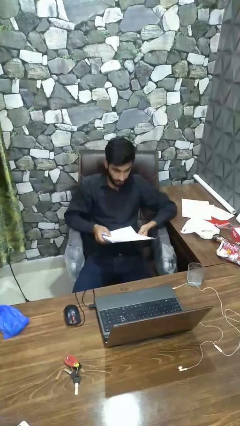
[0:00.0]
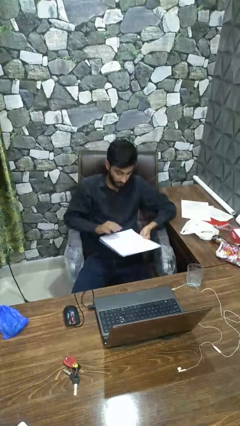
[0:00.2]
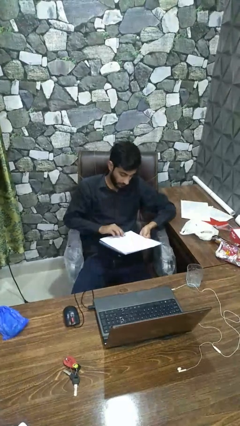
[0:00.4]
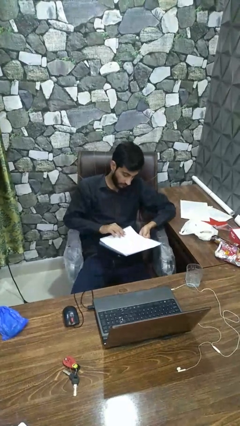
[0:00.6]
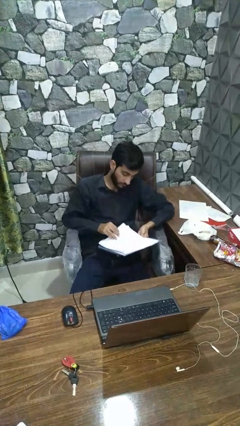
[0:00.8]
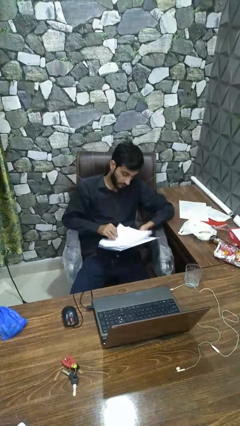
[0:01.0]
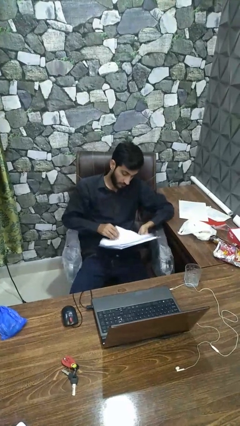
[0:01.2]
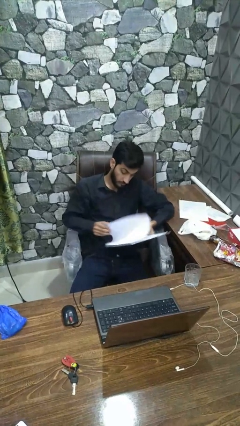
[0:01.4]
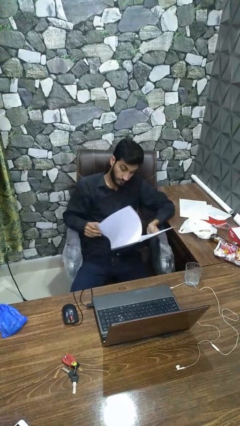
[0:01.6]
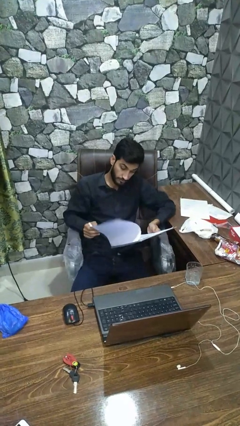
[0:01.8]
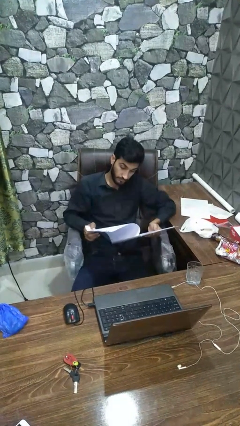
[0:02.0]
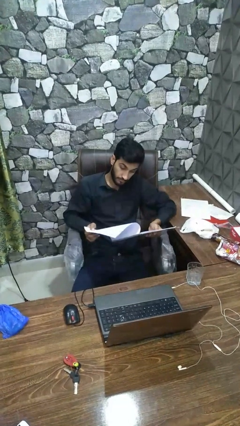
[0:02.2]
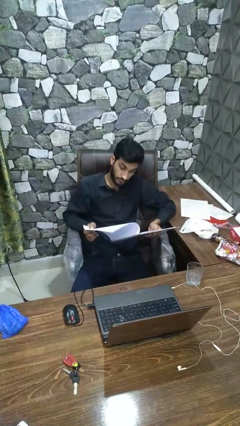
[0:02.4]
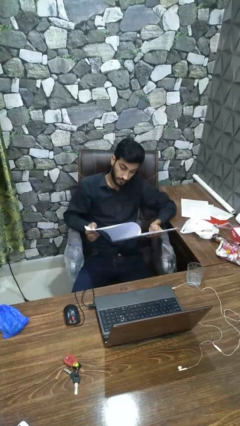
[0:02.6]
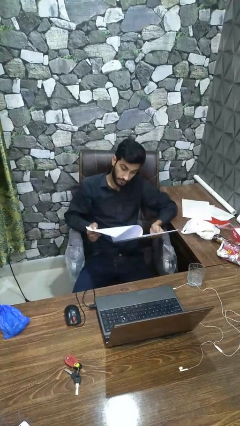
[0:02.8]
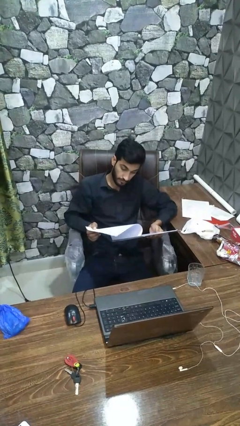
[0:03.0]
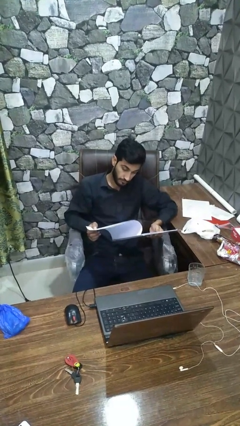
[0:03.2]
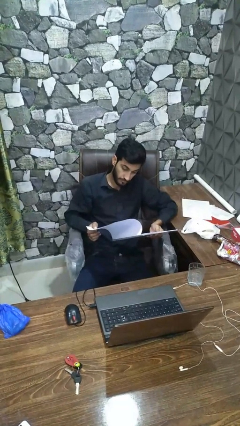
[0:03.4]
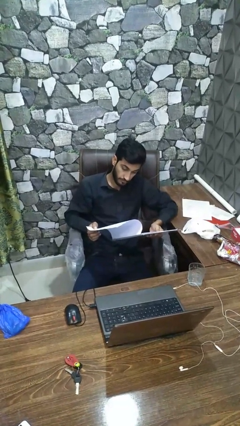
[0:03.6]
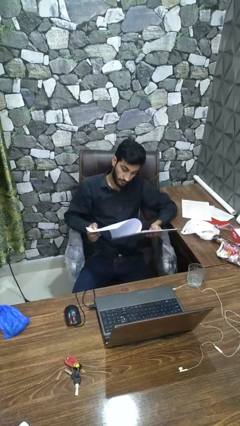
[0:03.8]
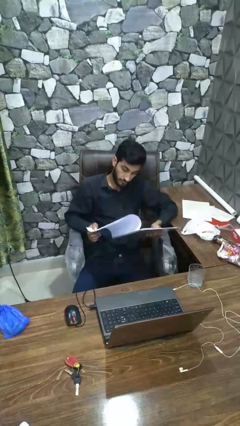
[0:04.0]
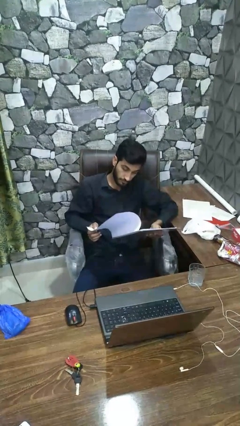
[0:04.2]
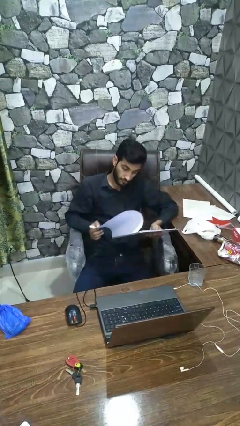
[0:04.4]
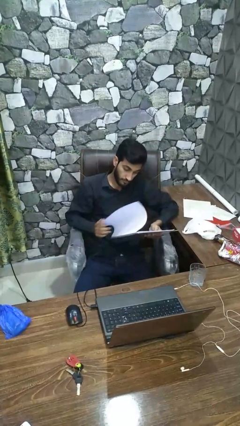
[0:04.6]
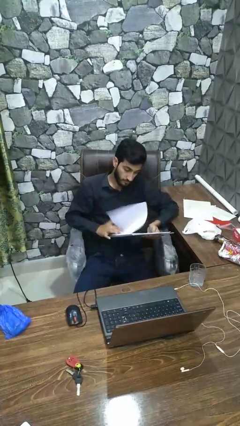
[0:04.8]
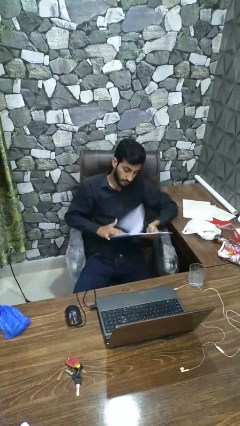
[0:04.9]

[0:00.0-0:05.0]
person reads book

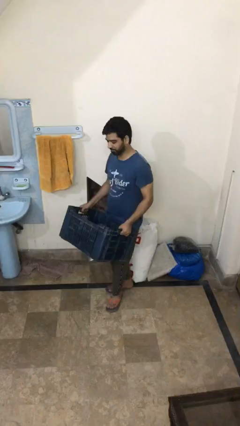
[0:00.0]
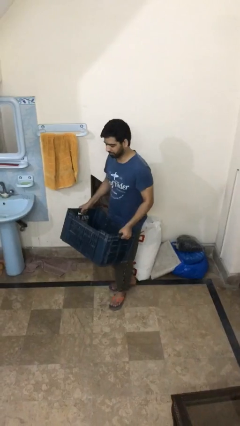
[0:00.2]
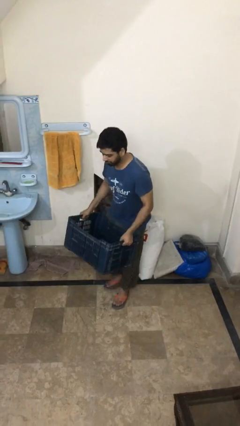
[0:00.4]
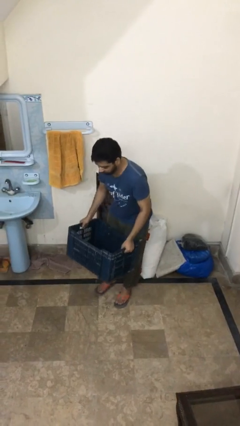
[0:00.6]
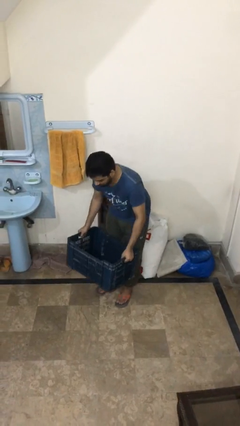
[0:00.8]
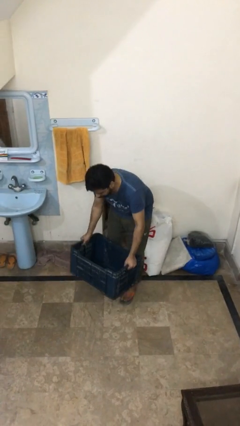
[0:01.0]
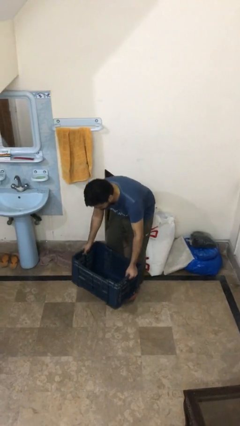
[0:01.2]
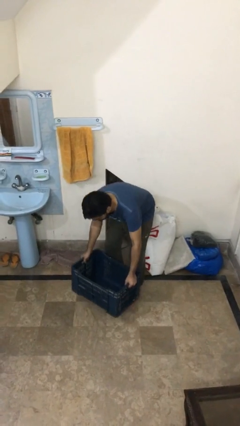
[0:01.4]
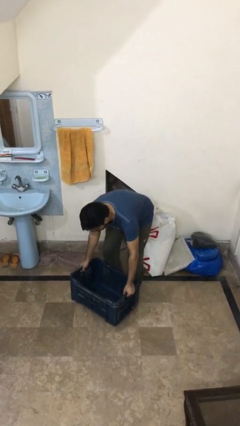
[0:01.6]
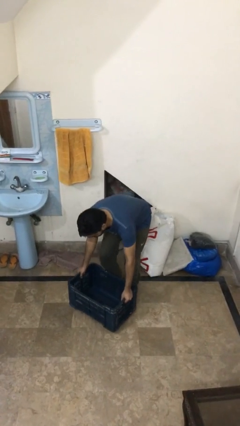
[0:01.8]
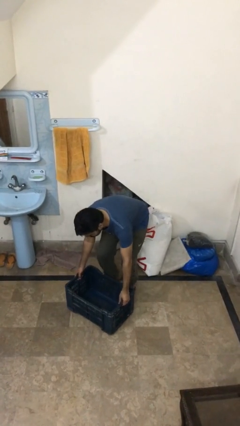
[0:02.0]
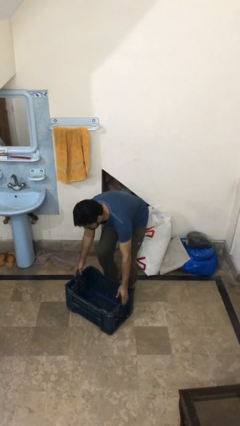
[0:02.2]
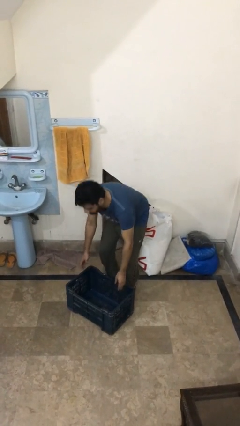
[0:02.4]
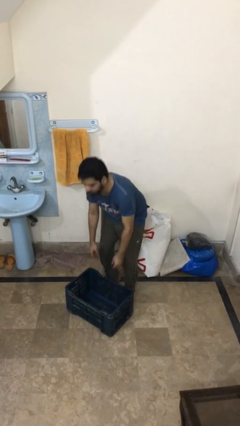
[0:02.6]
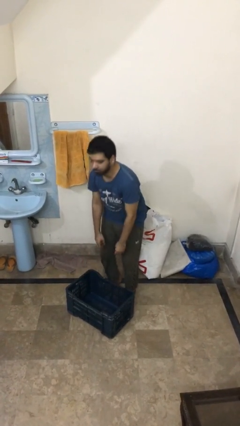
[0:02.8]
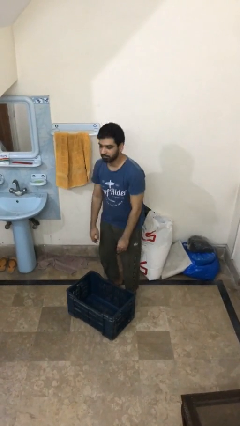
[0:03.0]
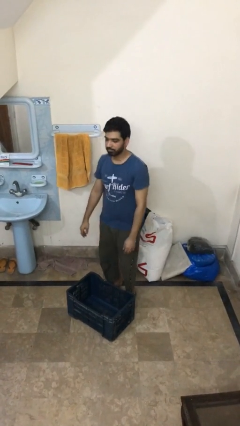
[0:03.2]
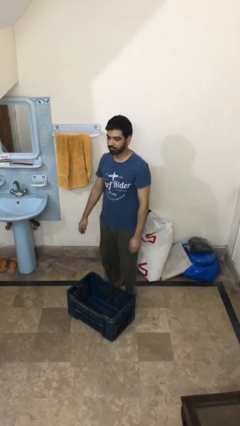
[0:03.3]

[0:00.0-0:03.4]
person puts down object on floor

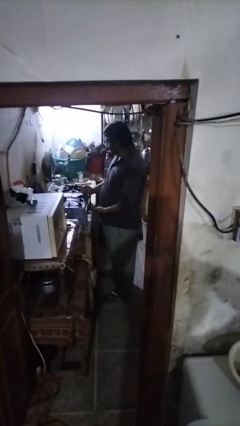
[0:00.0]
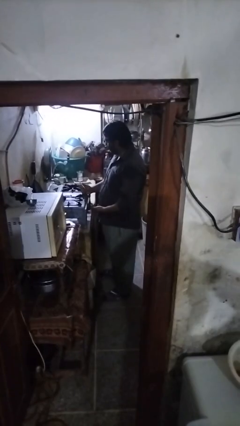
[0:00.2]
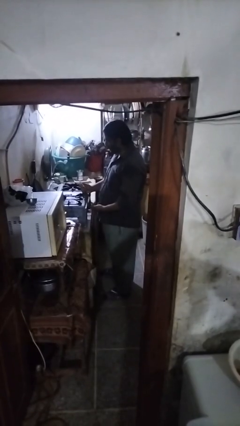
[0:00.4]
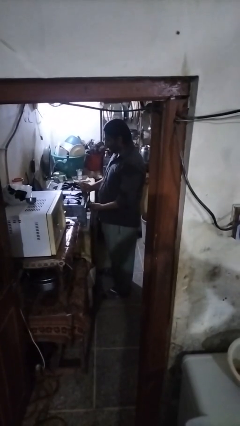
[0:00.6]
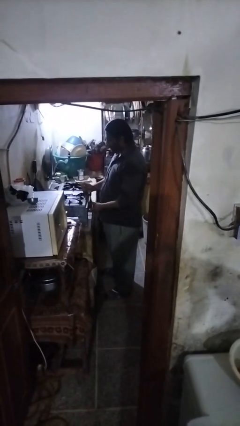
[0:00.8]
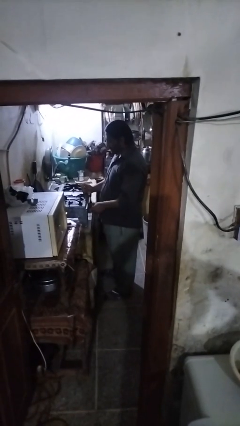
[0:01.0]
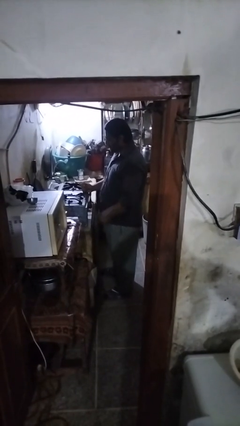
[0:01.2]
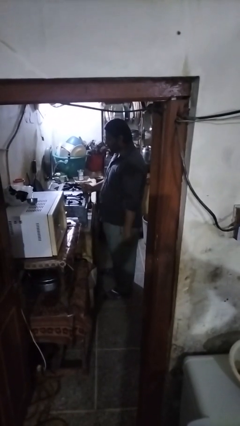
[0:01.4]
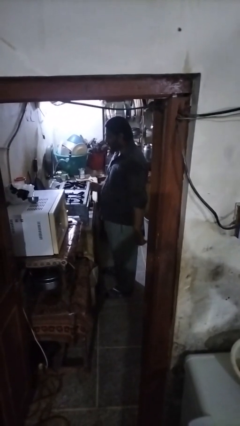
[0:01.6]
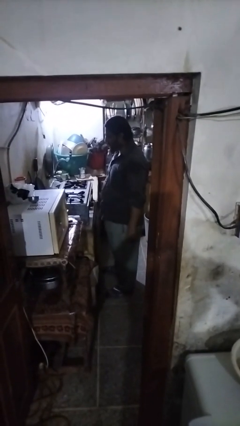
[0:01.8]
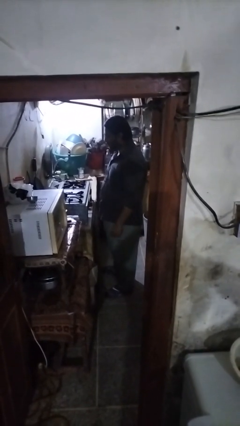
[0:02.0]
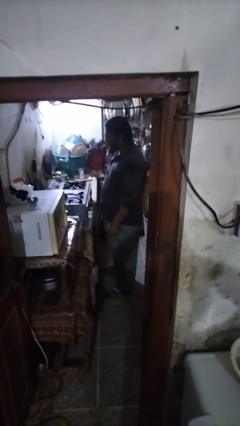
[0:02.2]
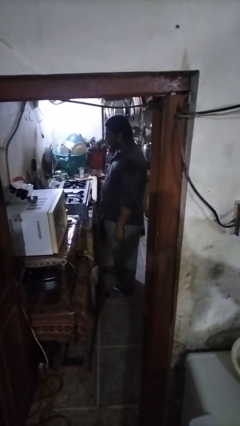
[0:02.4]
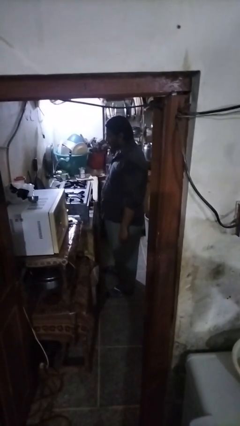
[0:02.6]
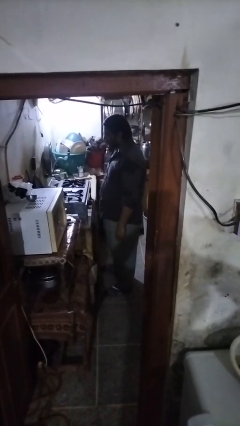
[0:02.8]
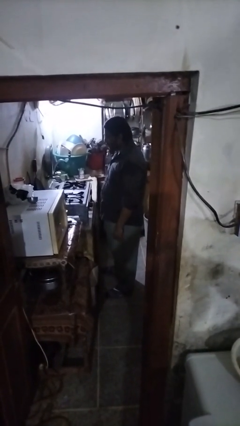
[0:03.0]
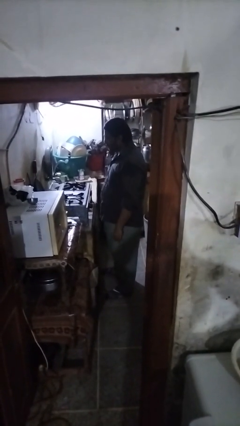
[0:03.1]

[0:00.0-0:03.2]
person turns off stovetop

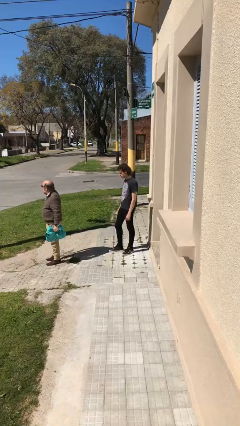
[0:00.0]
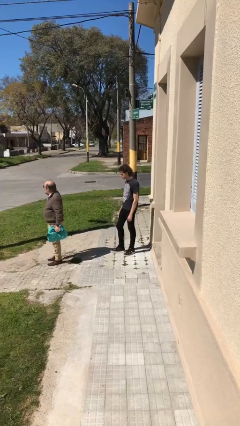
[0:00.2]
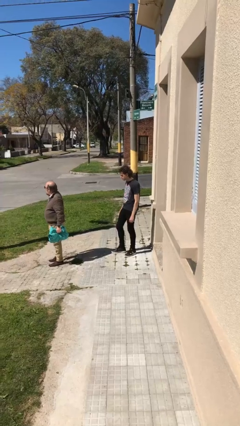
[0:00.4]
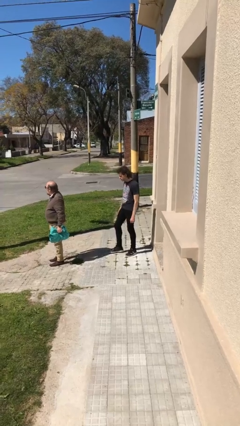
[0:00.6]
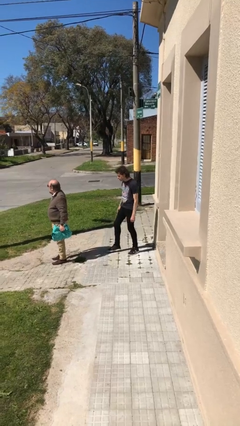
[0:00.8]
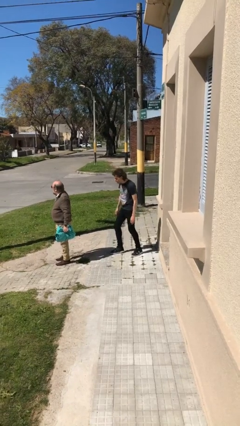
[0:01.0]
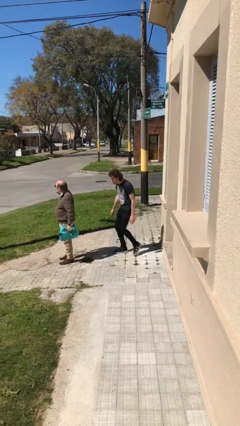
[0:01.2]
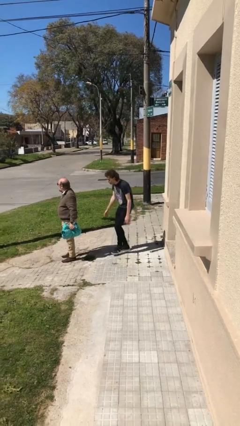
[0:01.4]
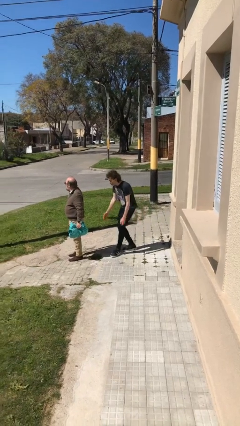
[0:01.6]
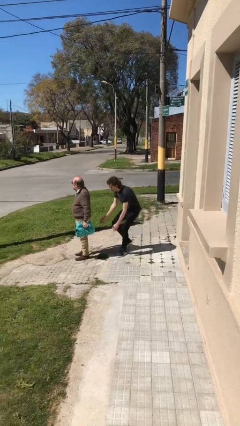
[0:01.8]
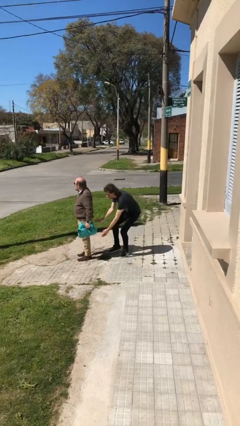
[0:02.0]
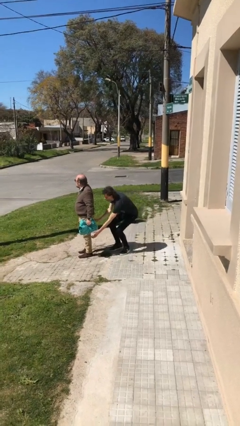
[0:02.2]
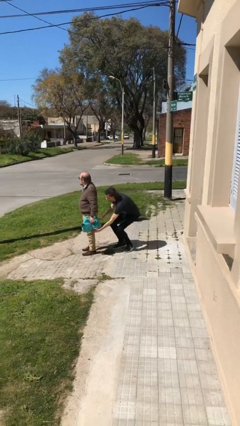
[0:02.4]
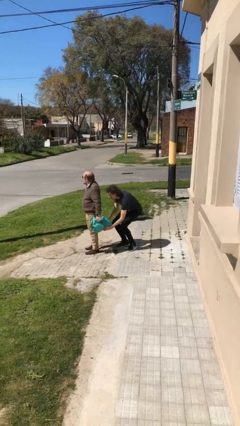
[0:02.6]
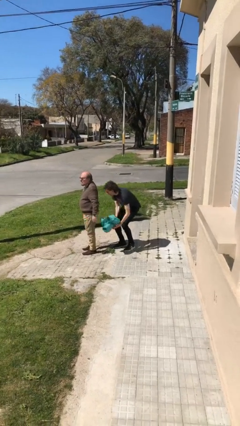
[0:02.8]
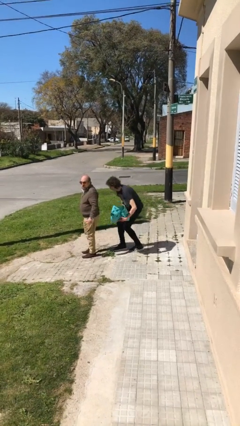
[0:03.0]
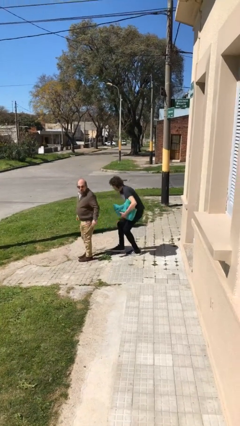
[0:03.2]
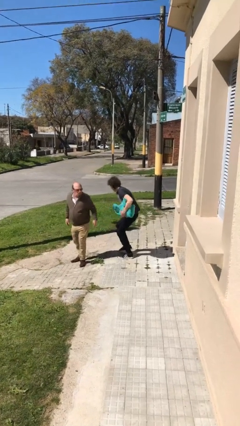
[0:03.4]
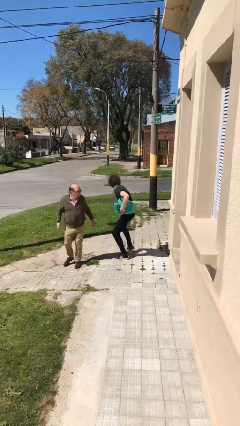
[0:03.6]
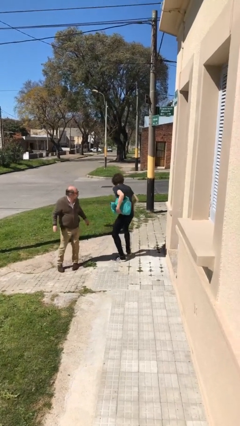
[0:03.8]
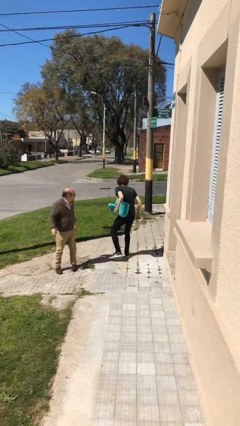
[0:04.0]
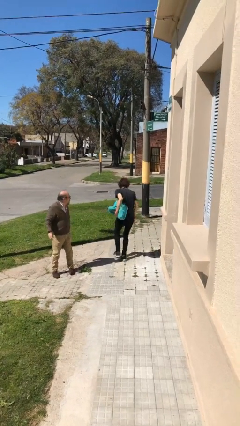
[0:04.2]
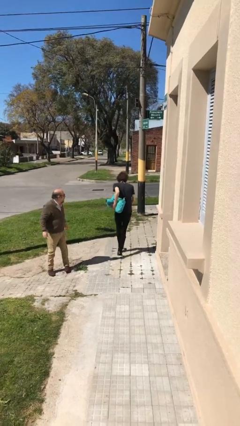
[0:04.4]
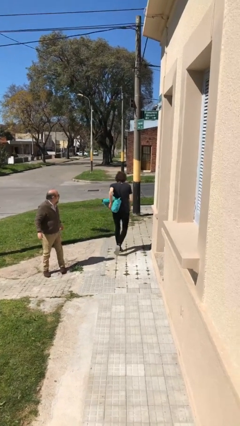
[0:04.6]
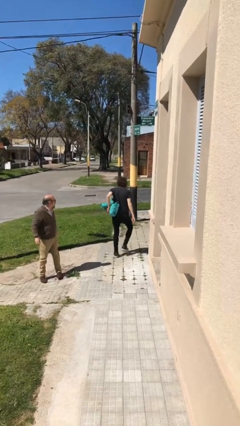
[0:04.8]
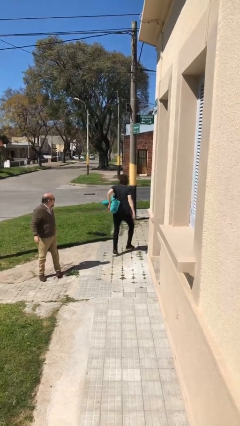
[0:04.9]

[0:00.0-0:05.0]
person steals object from person

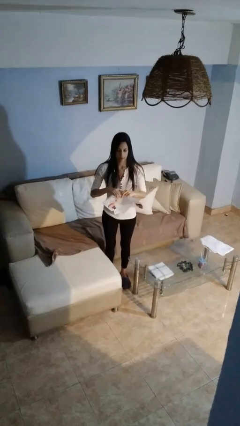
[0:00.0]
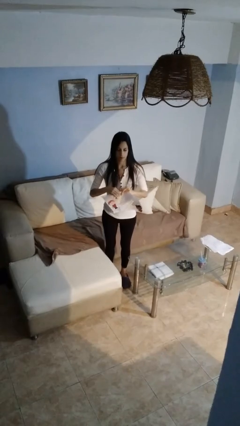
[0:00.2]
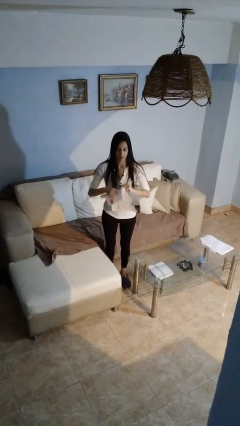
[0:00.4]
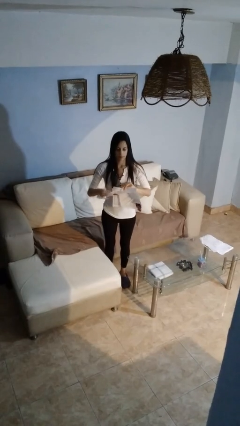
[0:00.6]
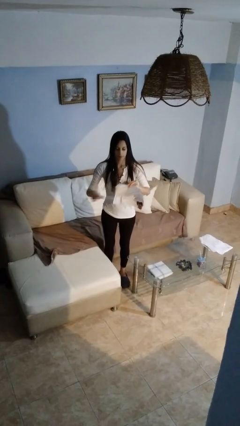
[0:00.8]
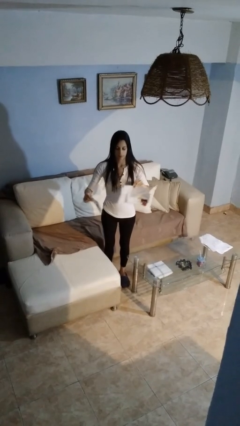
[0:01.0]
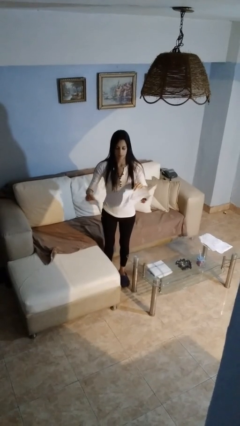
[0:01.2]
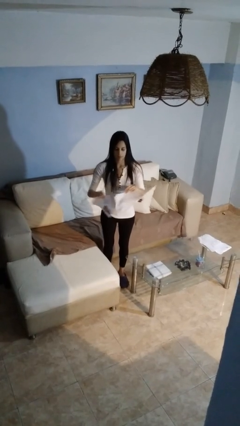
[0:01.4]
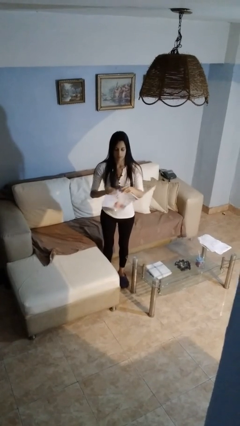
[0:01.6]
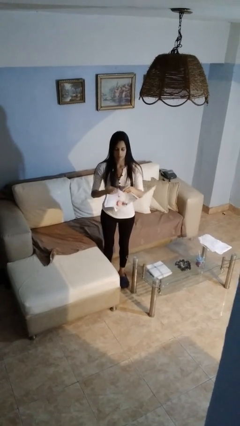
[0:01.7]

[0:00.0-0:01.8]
person tears paper
